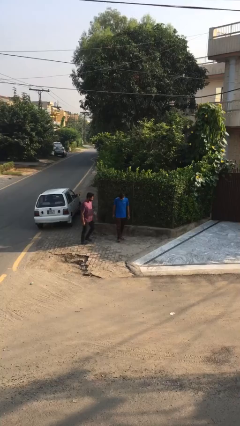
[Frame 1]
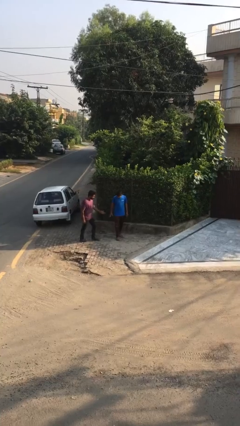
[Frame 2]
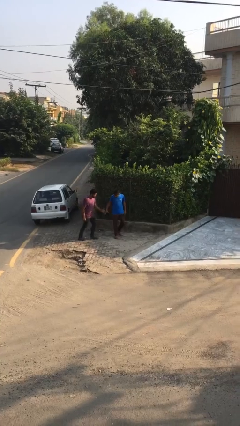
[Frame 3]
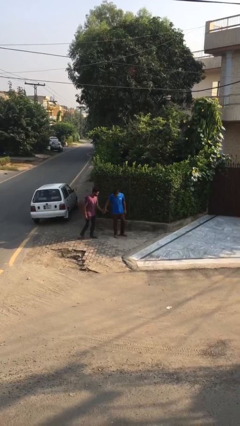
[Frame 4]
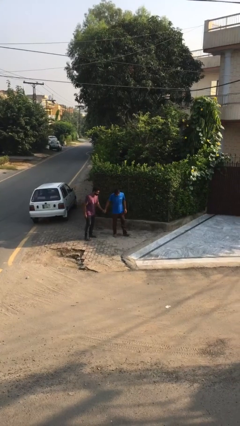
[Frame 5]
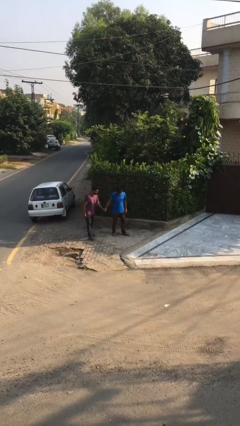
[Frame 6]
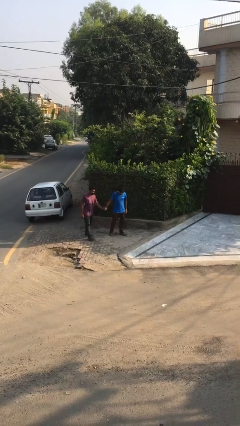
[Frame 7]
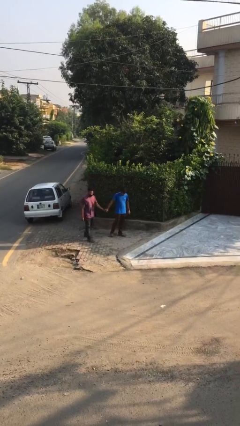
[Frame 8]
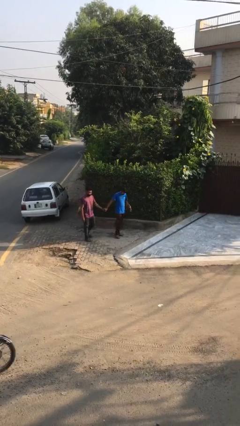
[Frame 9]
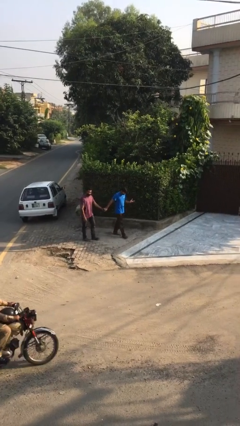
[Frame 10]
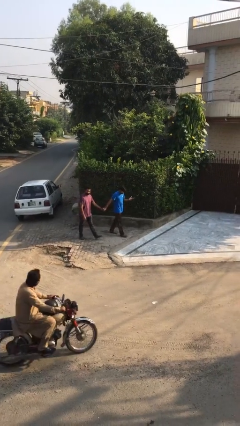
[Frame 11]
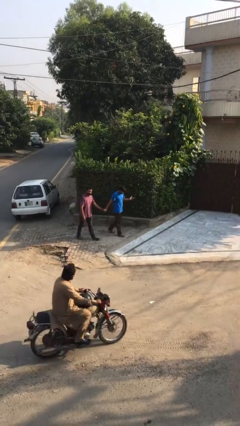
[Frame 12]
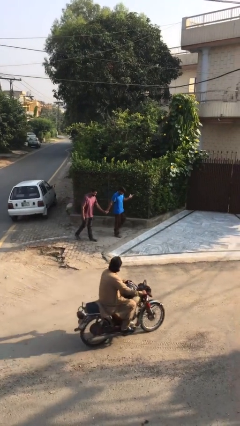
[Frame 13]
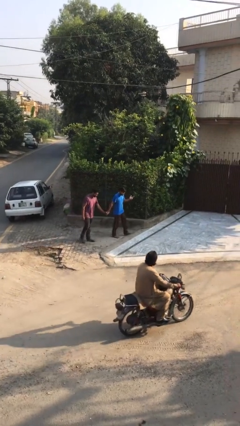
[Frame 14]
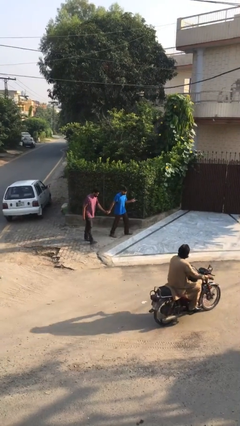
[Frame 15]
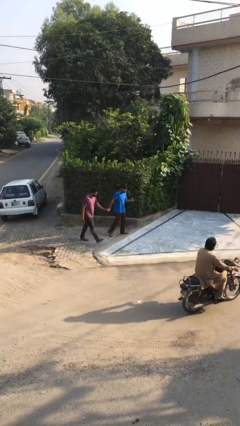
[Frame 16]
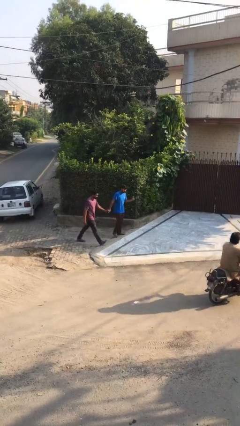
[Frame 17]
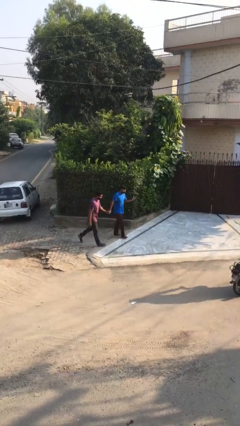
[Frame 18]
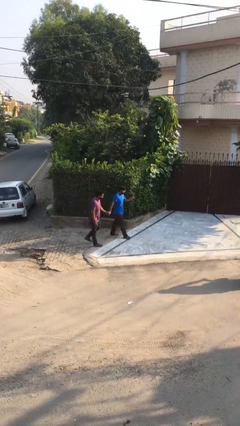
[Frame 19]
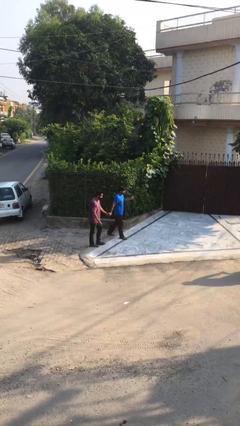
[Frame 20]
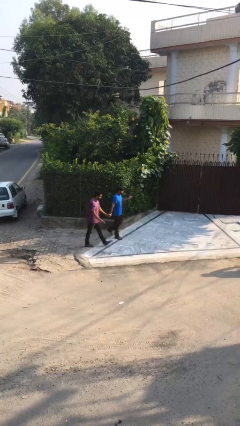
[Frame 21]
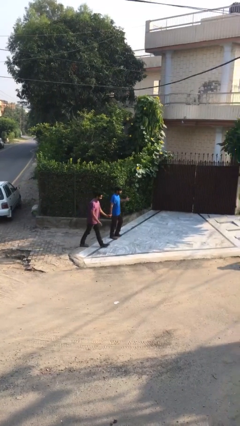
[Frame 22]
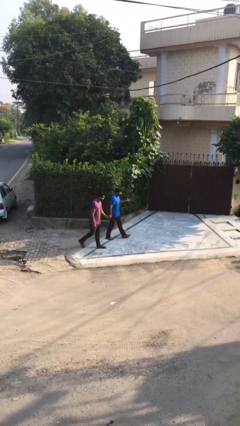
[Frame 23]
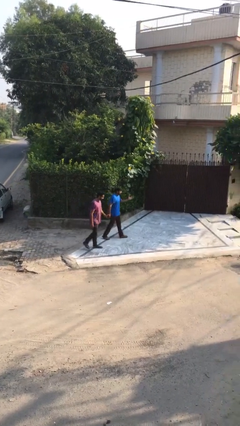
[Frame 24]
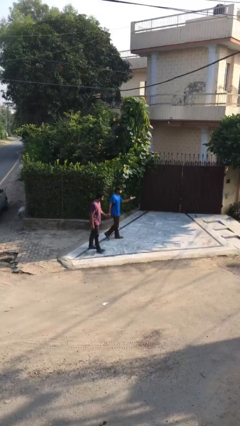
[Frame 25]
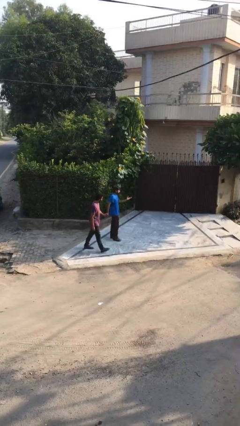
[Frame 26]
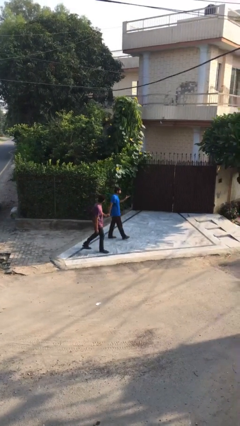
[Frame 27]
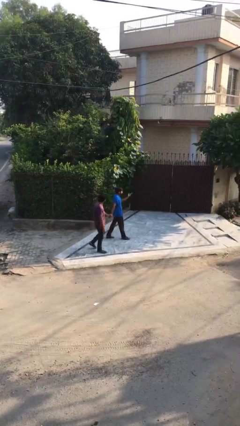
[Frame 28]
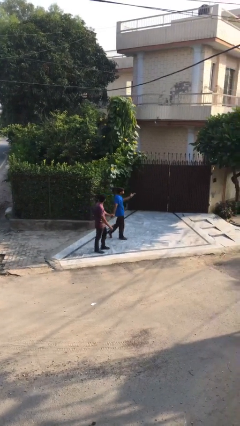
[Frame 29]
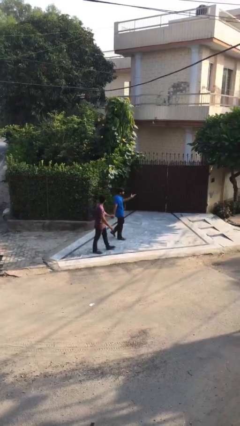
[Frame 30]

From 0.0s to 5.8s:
person holds hand

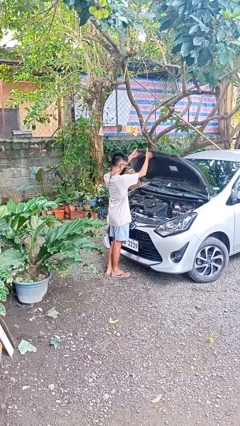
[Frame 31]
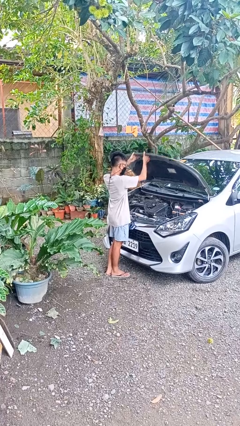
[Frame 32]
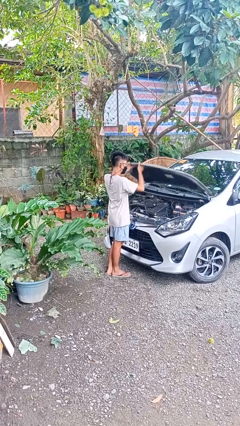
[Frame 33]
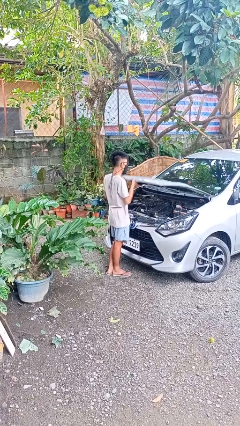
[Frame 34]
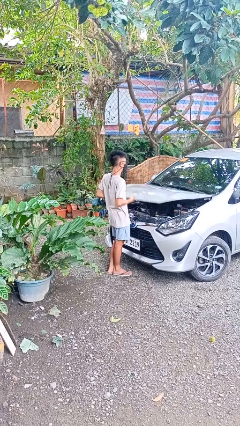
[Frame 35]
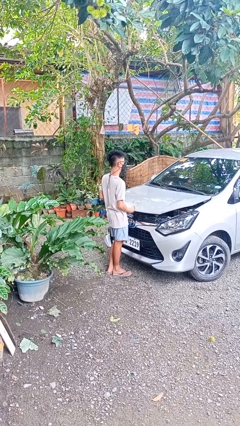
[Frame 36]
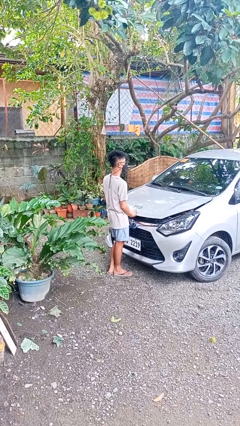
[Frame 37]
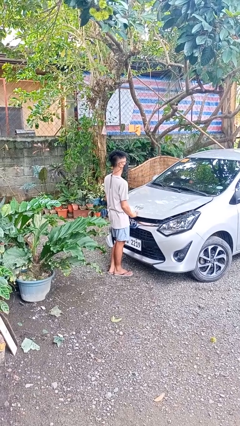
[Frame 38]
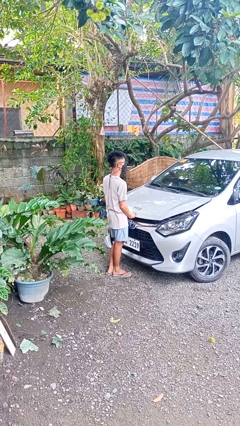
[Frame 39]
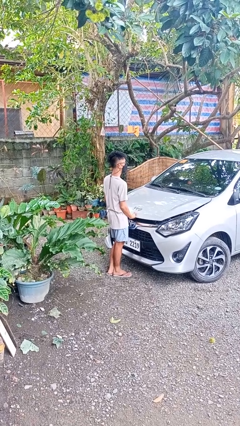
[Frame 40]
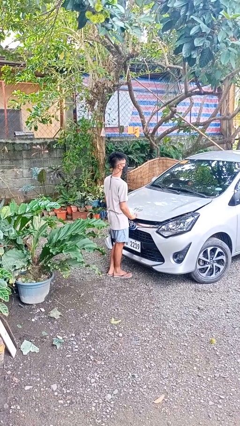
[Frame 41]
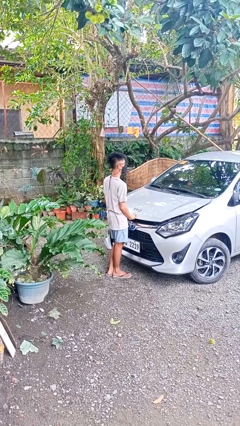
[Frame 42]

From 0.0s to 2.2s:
person closes car hood

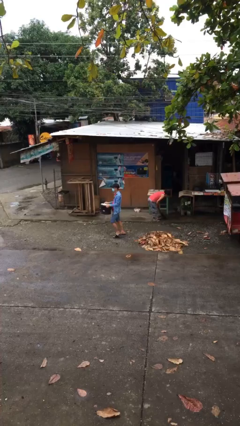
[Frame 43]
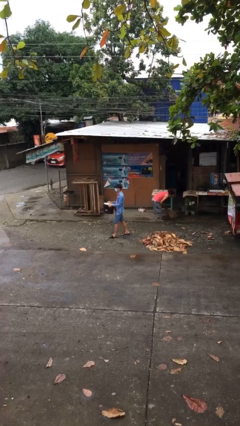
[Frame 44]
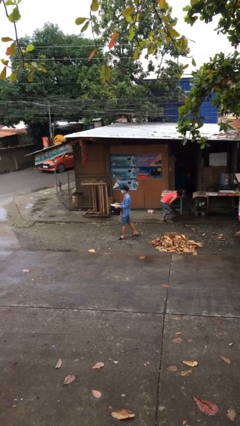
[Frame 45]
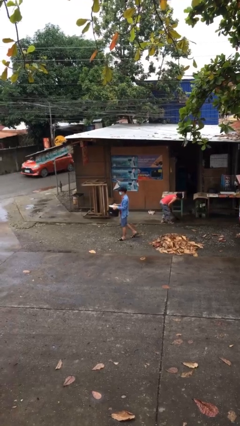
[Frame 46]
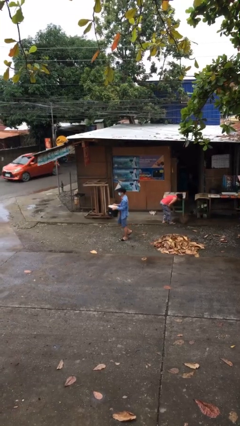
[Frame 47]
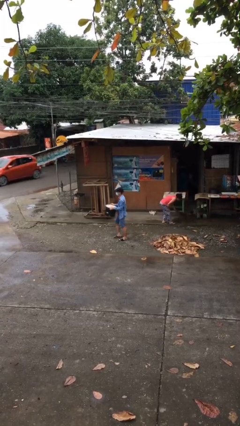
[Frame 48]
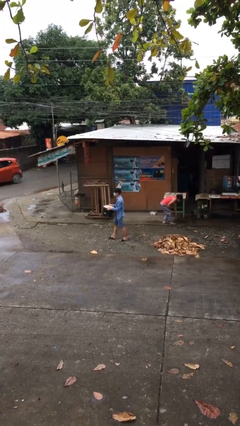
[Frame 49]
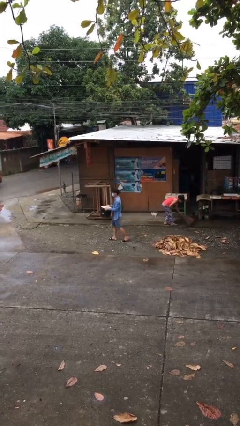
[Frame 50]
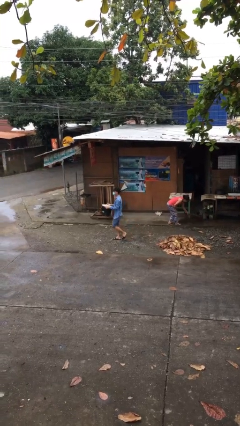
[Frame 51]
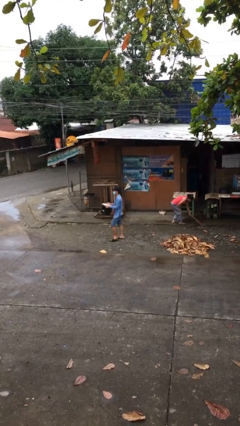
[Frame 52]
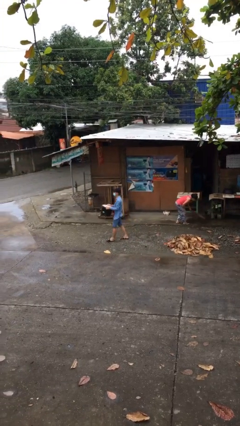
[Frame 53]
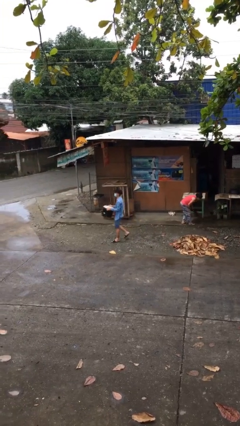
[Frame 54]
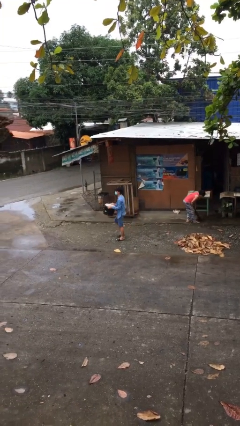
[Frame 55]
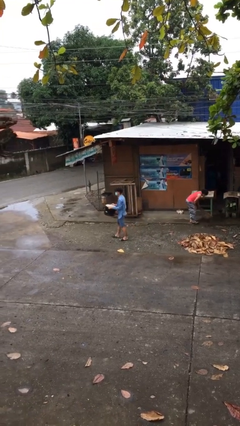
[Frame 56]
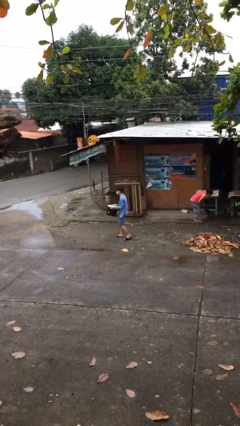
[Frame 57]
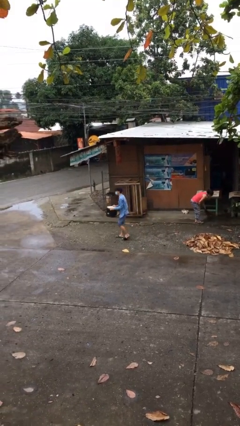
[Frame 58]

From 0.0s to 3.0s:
person carries heavy object

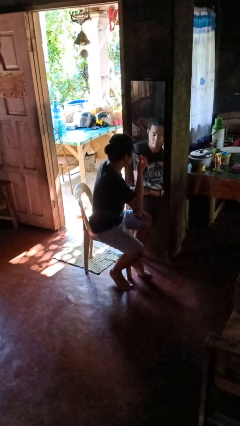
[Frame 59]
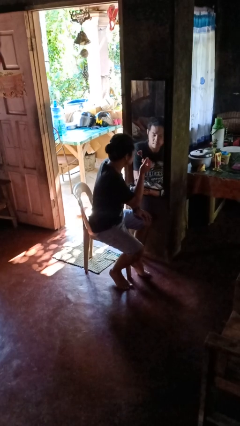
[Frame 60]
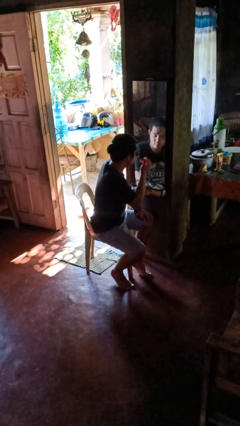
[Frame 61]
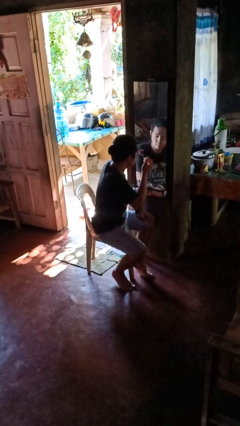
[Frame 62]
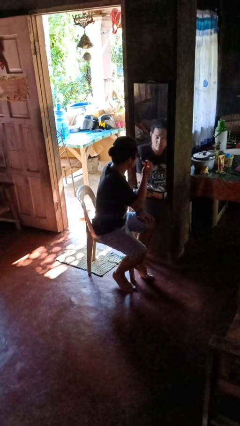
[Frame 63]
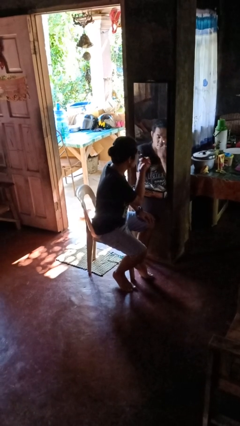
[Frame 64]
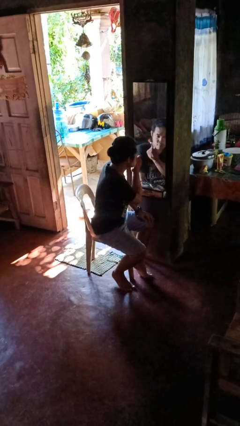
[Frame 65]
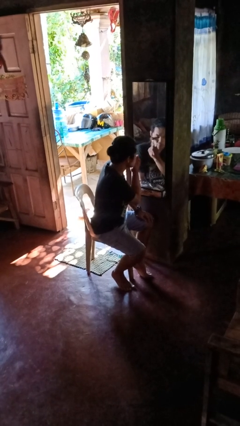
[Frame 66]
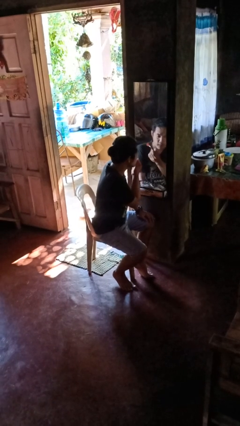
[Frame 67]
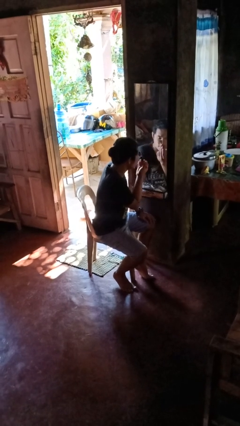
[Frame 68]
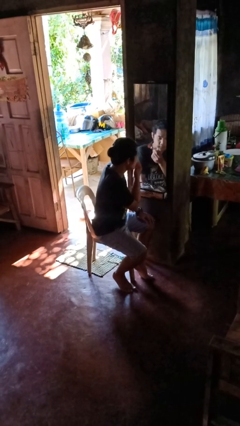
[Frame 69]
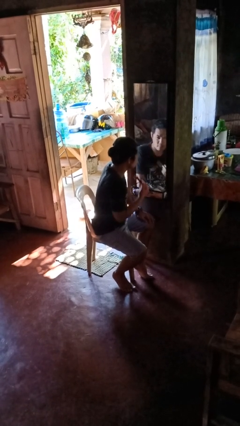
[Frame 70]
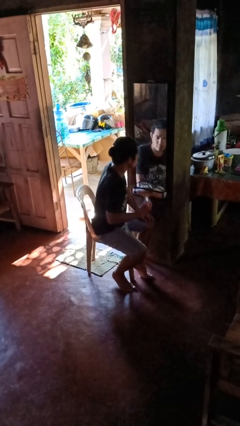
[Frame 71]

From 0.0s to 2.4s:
person applies eye makeup

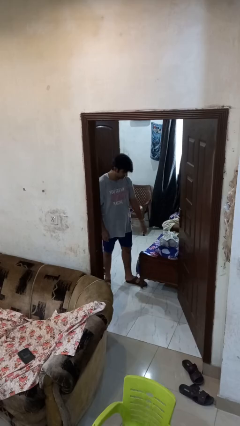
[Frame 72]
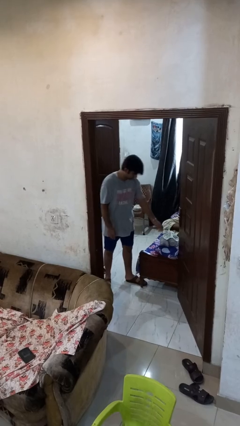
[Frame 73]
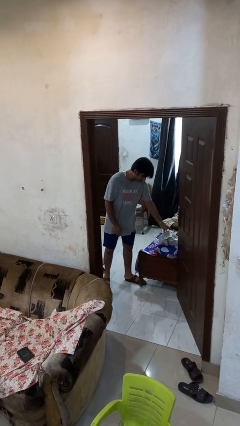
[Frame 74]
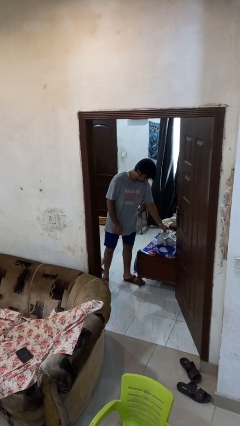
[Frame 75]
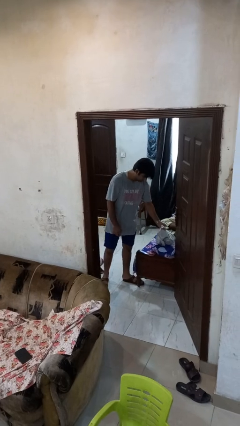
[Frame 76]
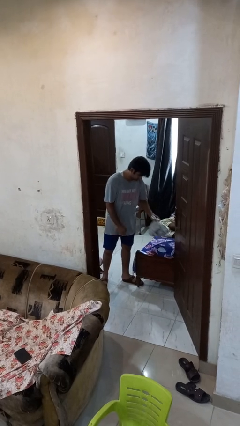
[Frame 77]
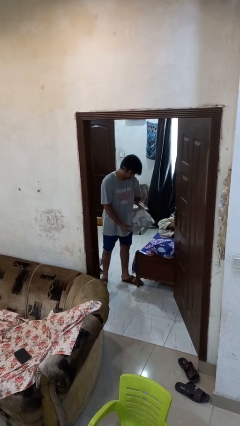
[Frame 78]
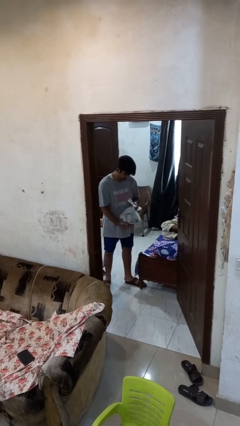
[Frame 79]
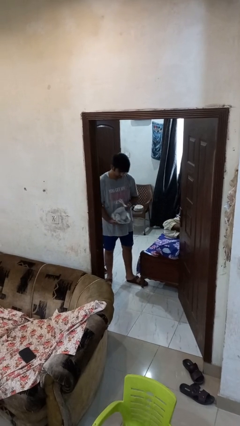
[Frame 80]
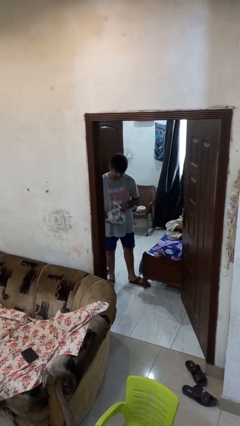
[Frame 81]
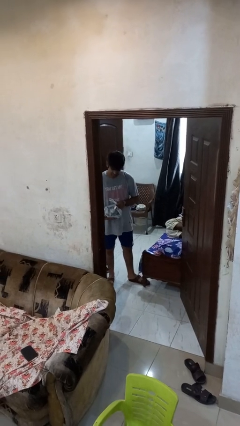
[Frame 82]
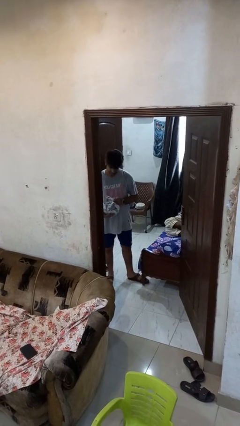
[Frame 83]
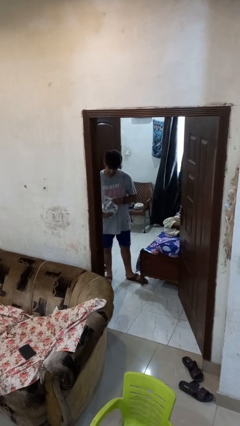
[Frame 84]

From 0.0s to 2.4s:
person picks up object from bed

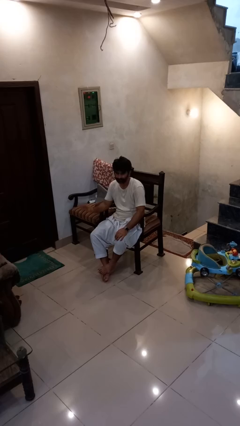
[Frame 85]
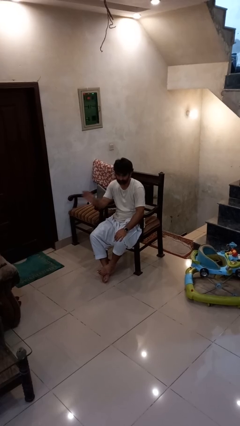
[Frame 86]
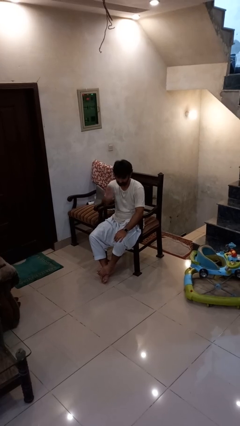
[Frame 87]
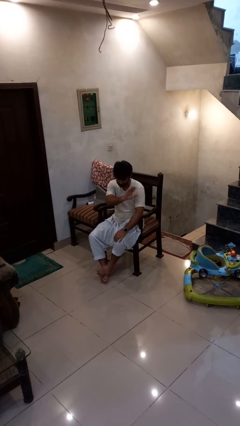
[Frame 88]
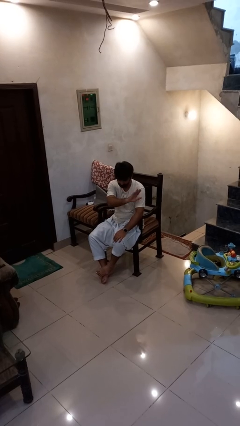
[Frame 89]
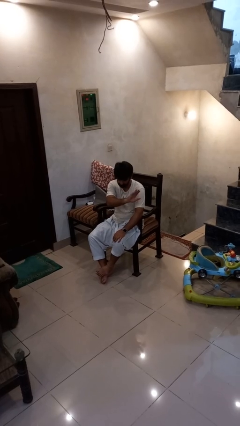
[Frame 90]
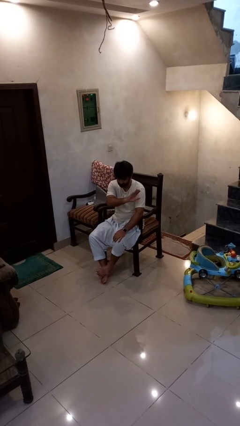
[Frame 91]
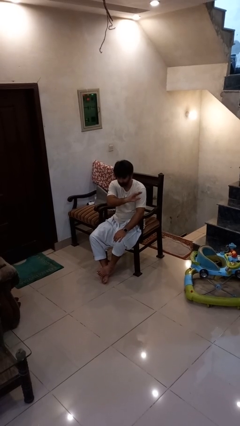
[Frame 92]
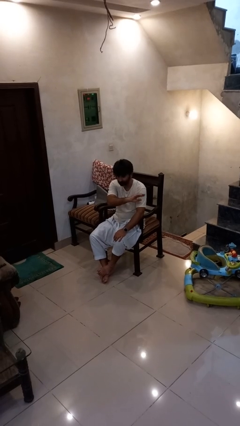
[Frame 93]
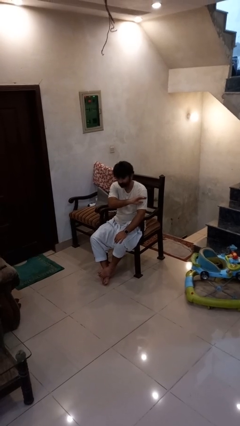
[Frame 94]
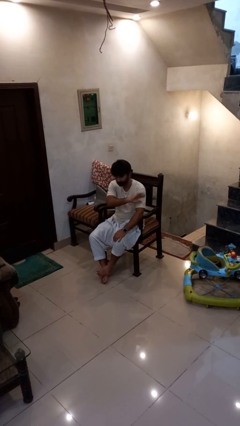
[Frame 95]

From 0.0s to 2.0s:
person gestures swipe left
